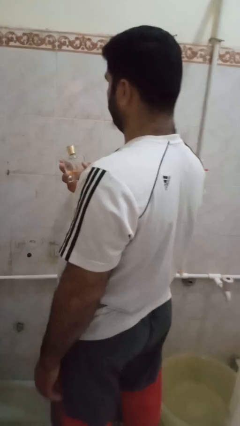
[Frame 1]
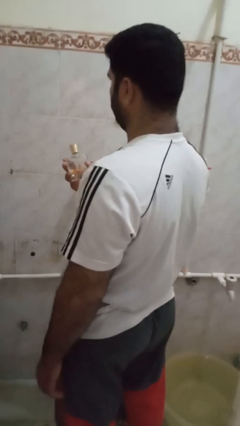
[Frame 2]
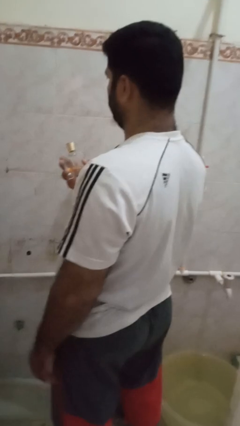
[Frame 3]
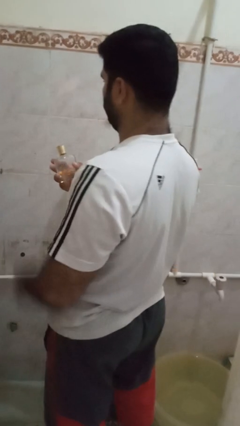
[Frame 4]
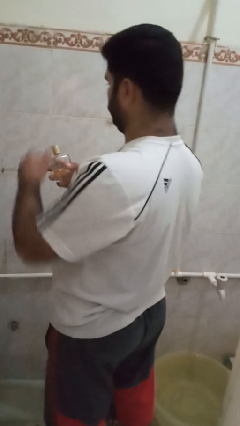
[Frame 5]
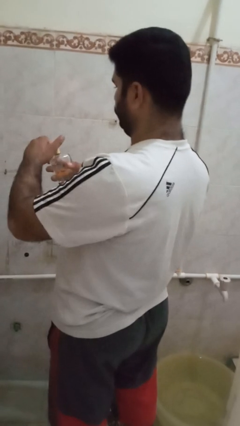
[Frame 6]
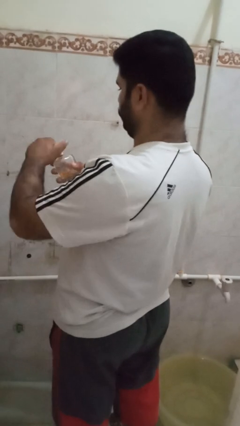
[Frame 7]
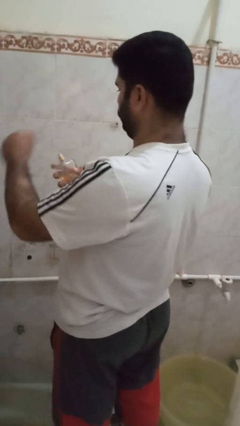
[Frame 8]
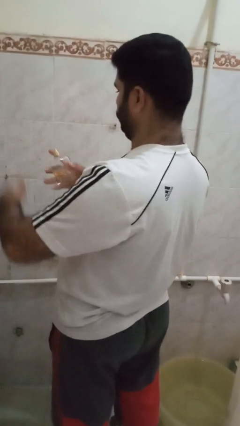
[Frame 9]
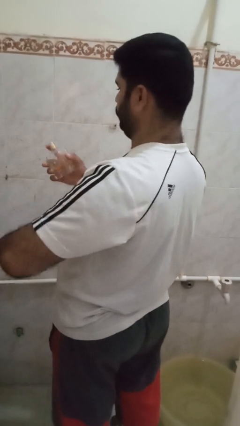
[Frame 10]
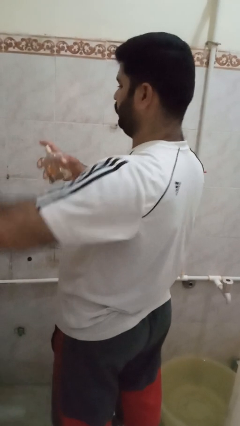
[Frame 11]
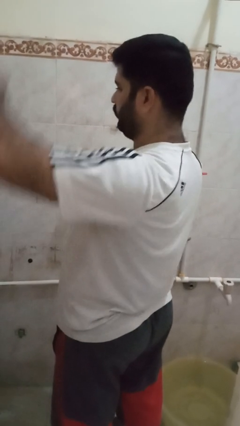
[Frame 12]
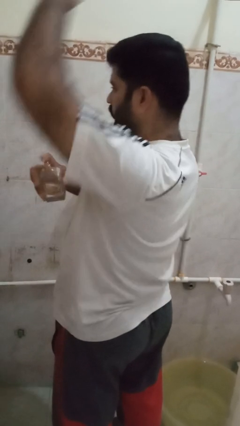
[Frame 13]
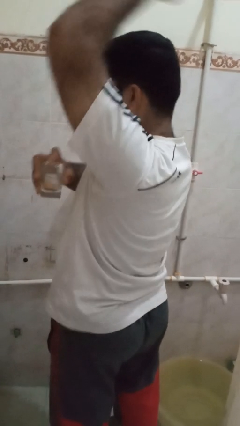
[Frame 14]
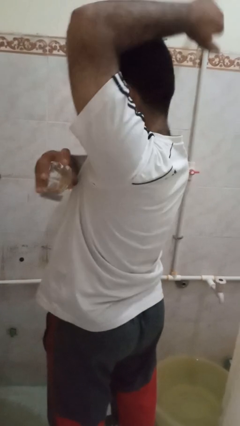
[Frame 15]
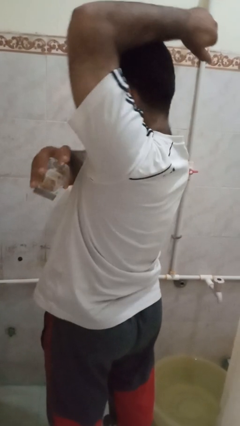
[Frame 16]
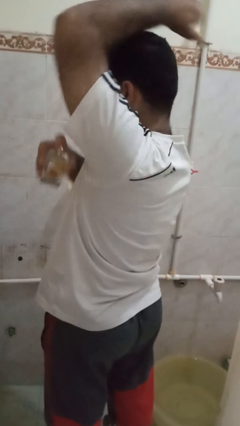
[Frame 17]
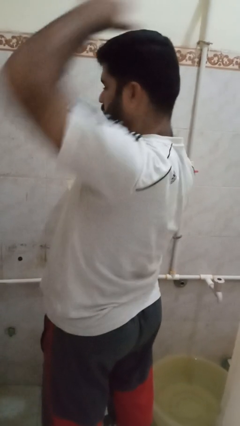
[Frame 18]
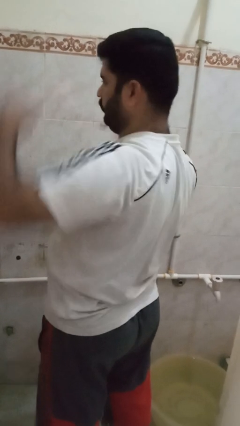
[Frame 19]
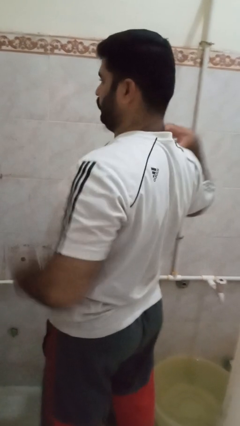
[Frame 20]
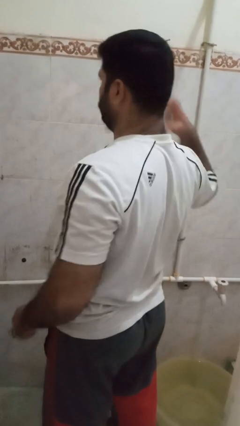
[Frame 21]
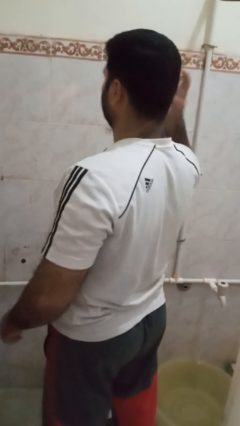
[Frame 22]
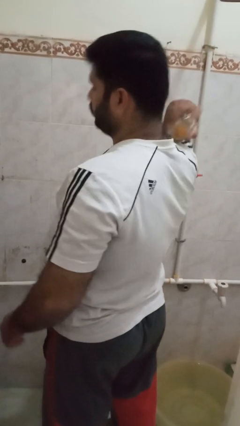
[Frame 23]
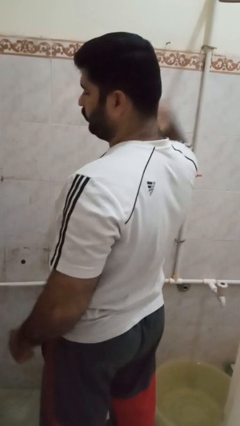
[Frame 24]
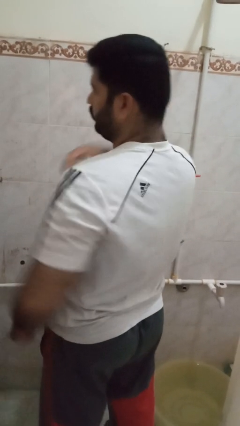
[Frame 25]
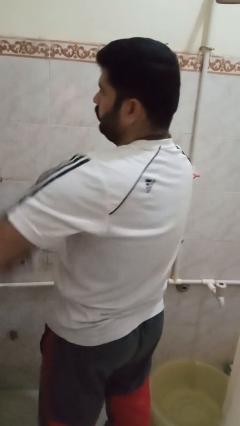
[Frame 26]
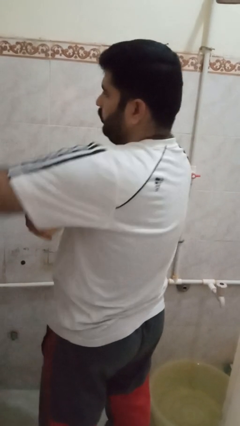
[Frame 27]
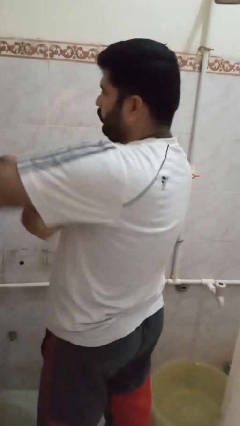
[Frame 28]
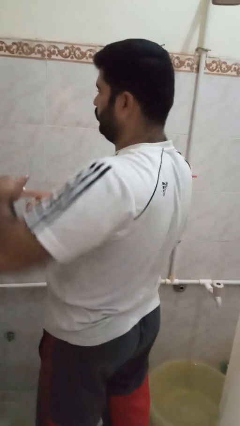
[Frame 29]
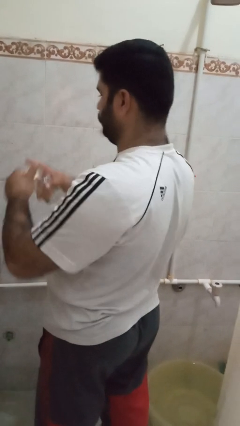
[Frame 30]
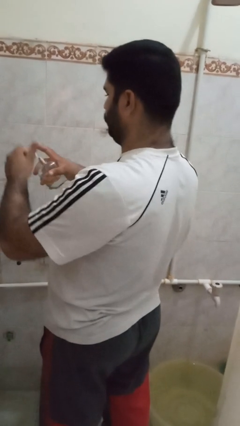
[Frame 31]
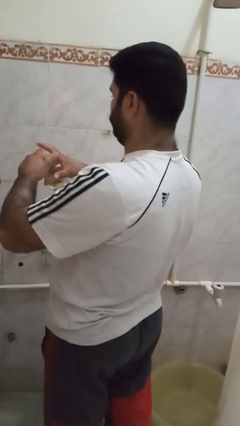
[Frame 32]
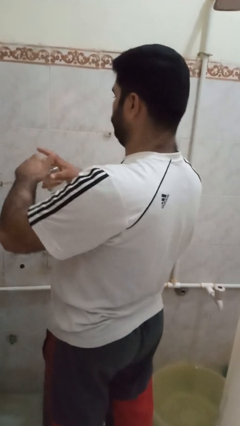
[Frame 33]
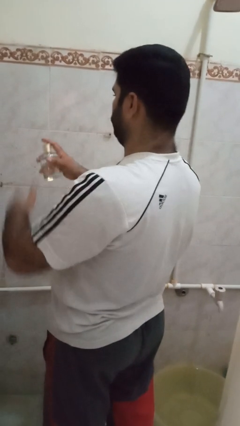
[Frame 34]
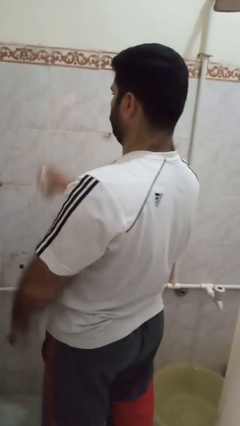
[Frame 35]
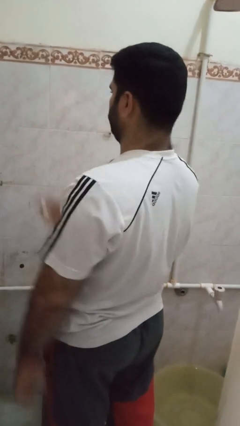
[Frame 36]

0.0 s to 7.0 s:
person applies deodorant

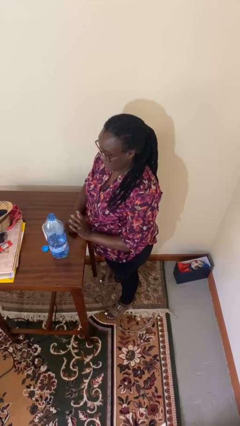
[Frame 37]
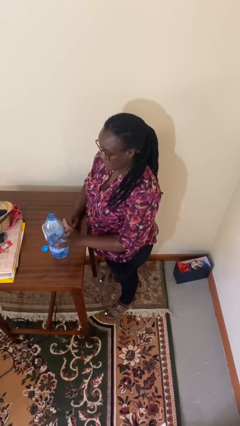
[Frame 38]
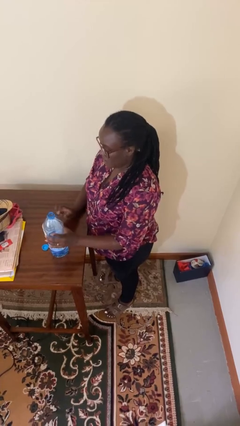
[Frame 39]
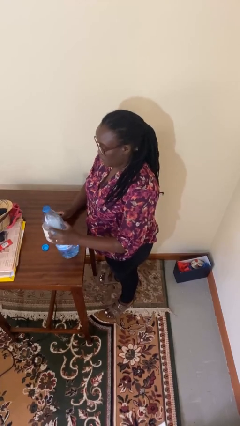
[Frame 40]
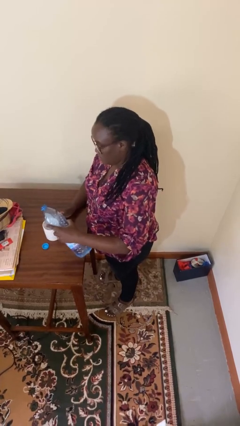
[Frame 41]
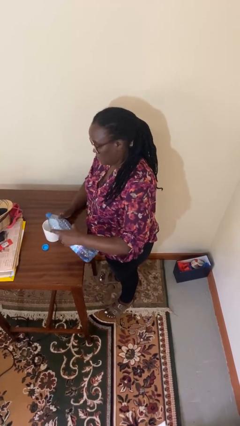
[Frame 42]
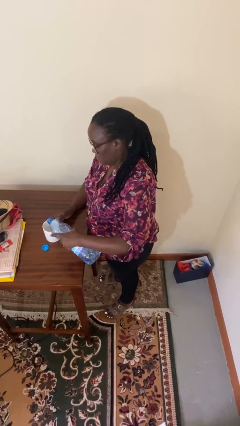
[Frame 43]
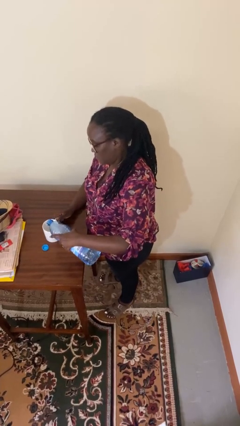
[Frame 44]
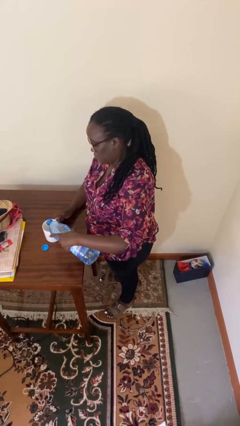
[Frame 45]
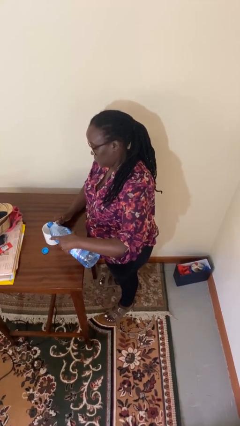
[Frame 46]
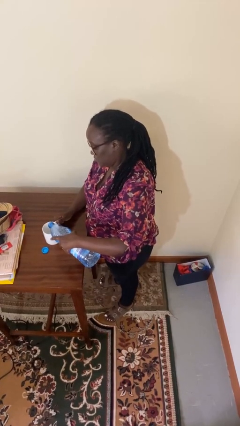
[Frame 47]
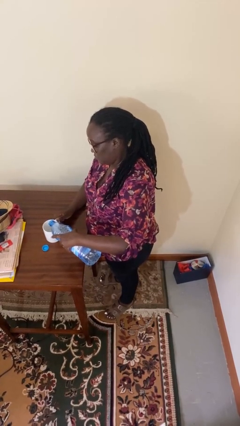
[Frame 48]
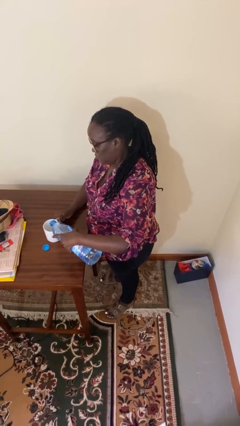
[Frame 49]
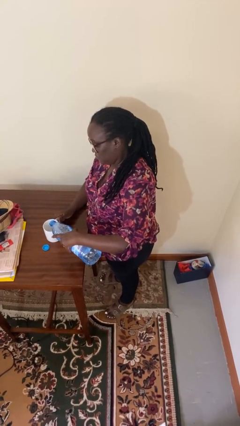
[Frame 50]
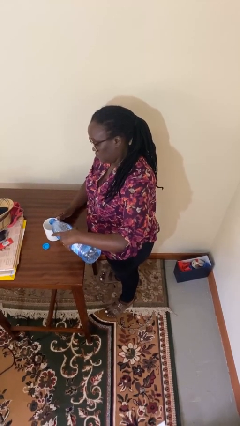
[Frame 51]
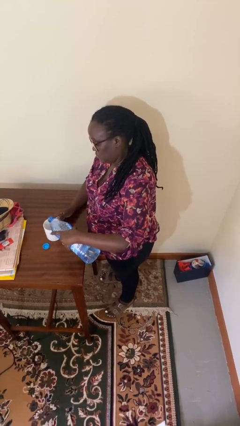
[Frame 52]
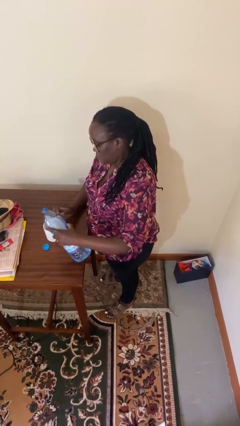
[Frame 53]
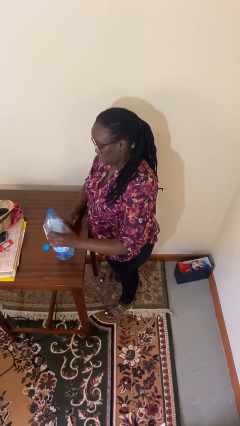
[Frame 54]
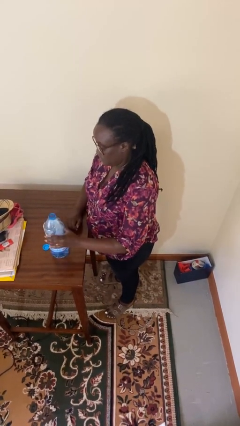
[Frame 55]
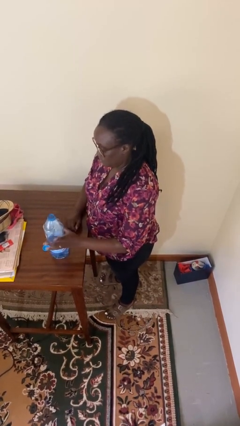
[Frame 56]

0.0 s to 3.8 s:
person pours liquid into cup

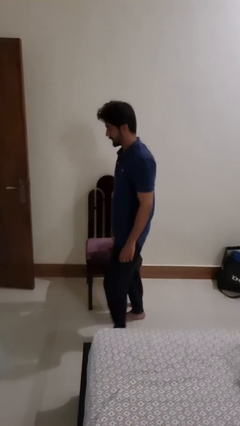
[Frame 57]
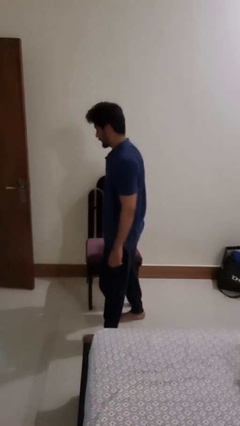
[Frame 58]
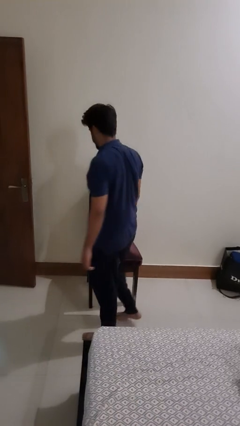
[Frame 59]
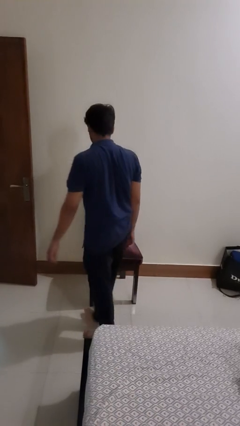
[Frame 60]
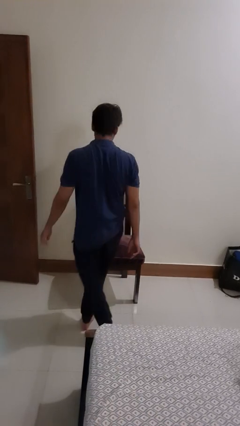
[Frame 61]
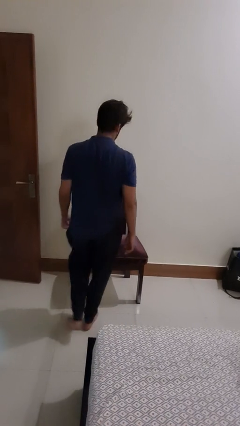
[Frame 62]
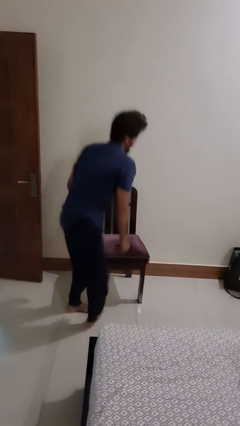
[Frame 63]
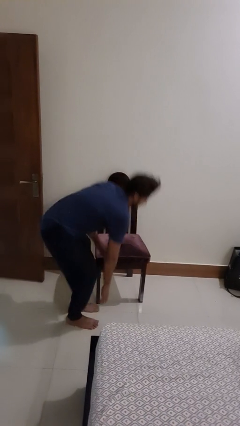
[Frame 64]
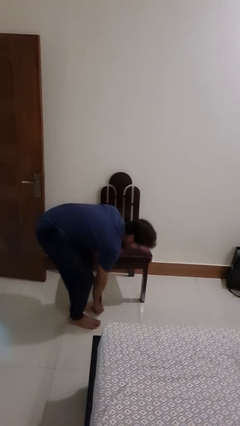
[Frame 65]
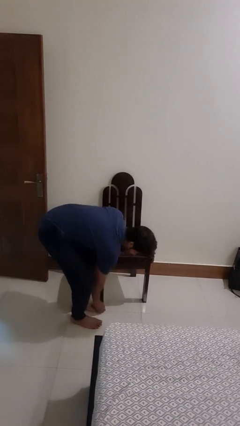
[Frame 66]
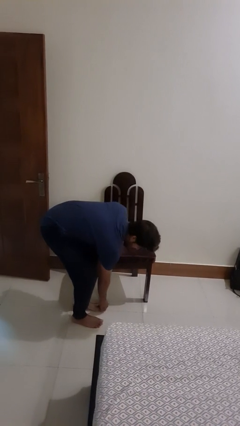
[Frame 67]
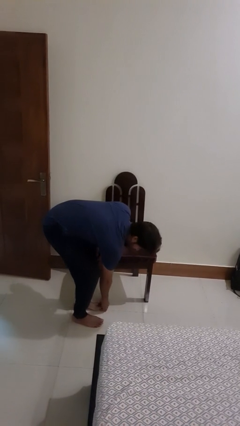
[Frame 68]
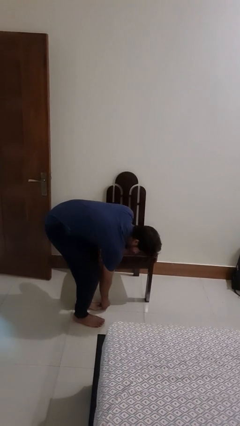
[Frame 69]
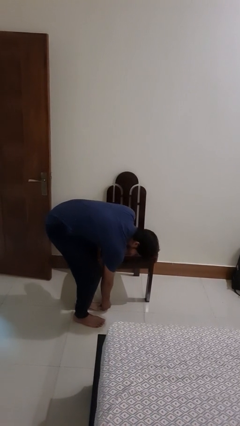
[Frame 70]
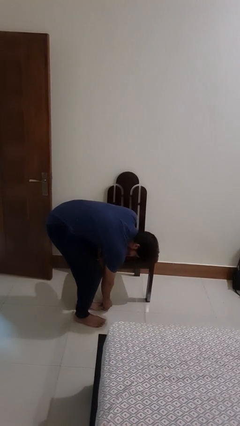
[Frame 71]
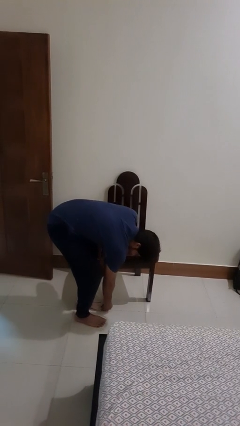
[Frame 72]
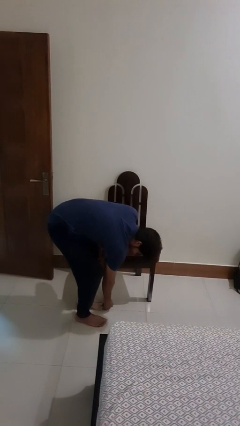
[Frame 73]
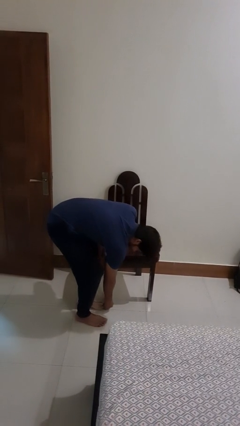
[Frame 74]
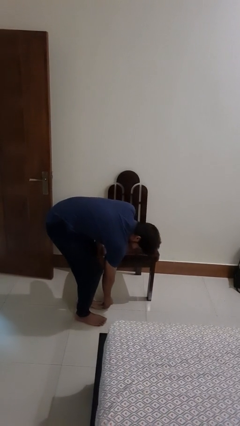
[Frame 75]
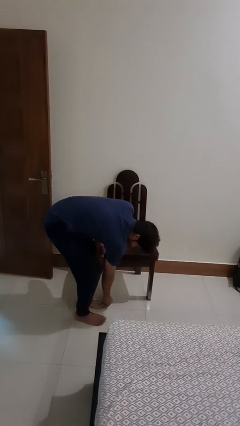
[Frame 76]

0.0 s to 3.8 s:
person stubs toe

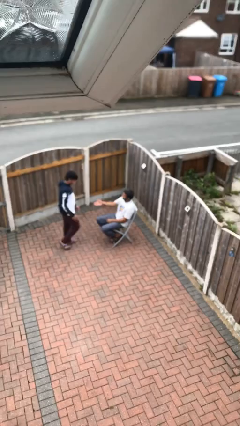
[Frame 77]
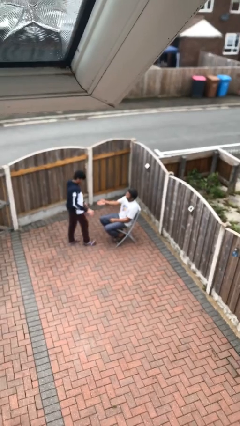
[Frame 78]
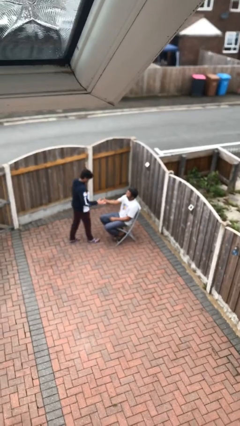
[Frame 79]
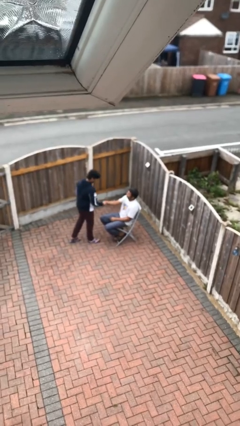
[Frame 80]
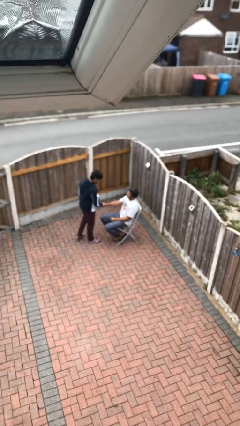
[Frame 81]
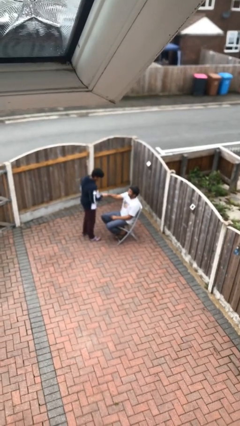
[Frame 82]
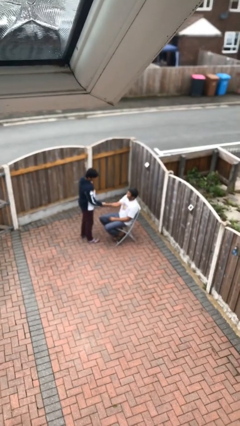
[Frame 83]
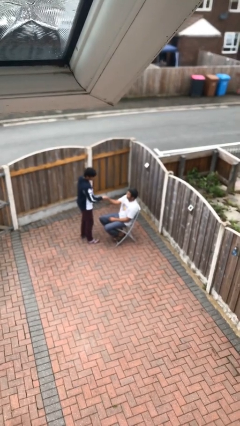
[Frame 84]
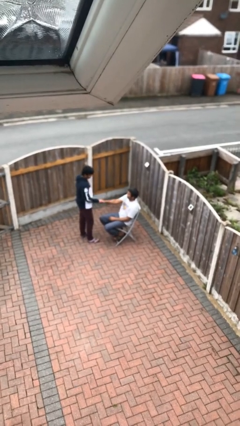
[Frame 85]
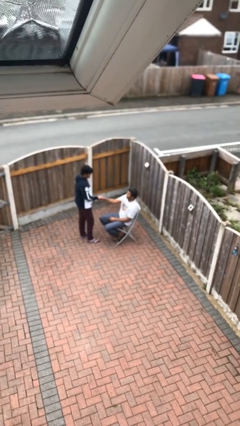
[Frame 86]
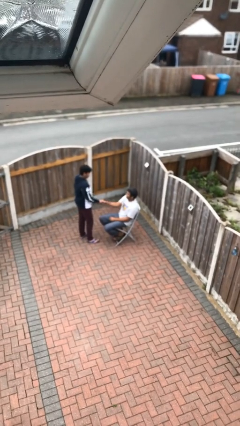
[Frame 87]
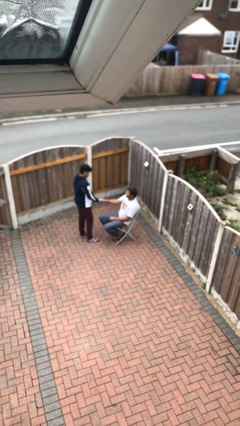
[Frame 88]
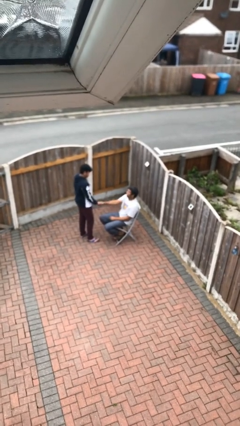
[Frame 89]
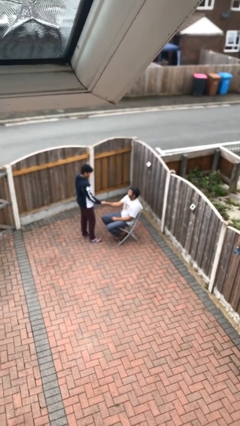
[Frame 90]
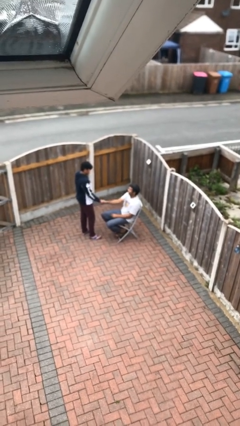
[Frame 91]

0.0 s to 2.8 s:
person shakes hand

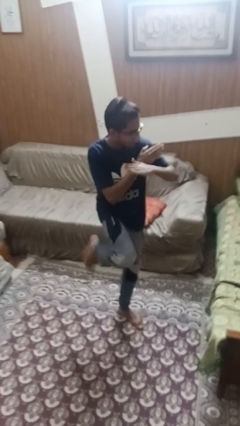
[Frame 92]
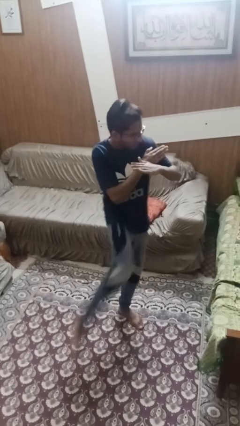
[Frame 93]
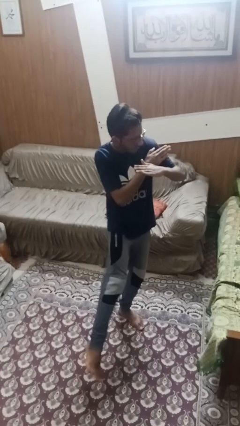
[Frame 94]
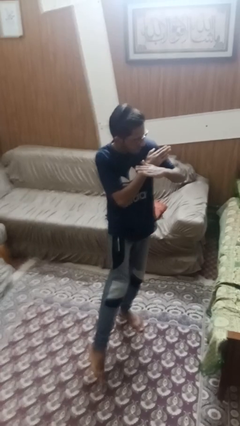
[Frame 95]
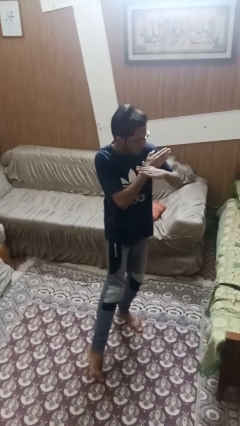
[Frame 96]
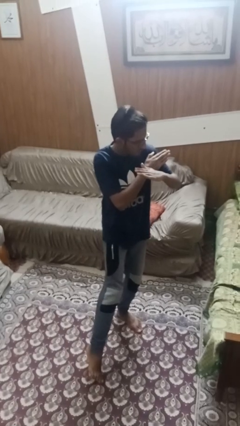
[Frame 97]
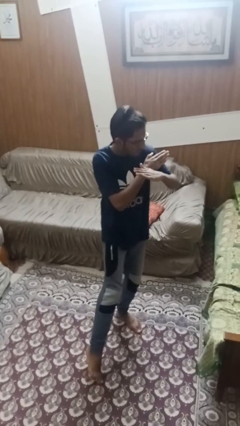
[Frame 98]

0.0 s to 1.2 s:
person karate kicks
